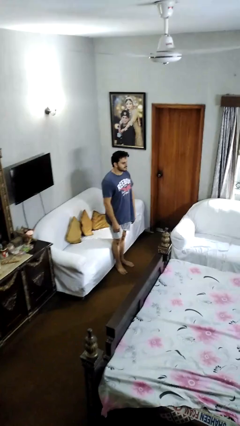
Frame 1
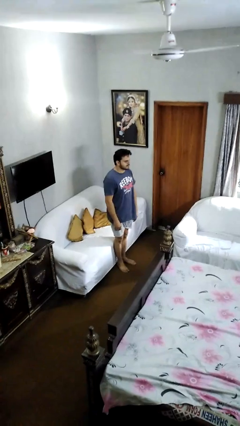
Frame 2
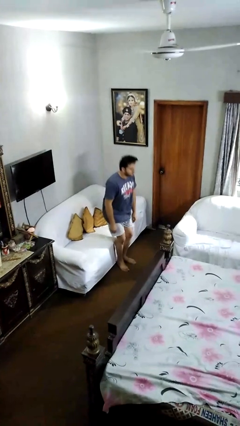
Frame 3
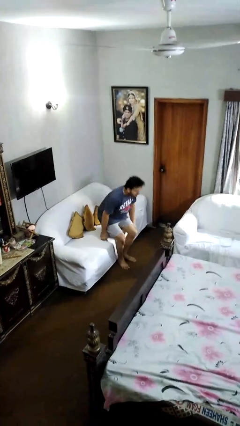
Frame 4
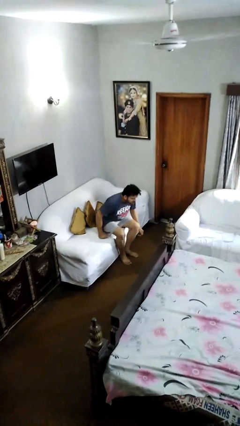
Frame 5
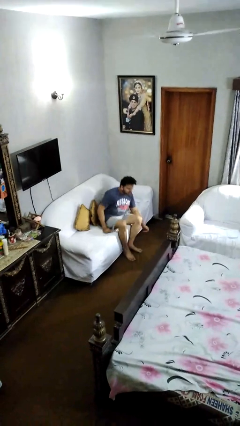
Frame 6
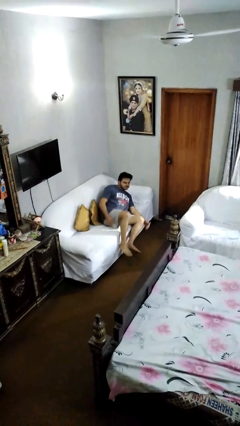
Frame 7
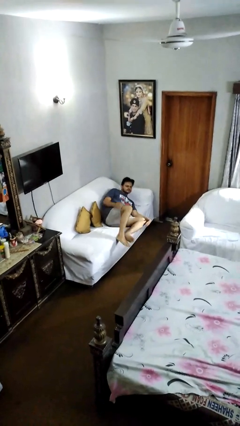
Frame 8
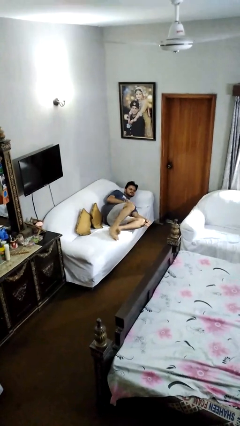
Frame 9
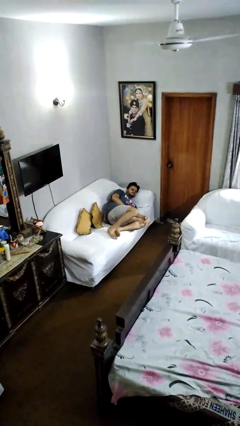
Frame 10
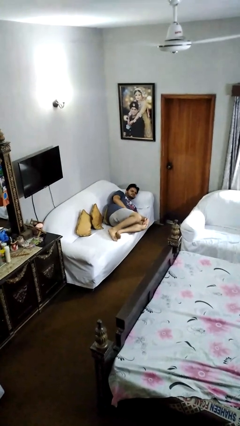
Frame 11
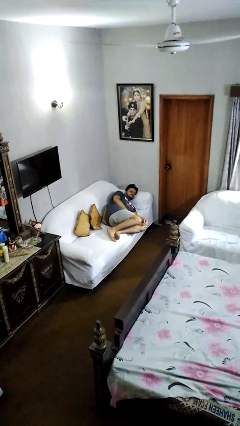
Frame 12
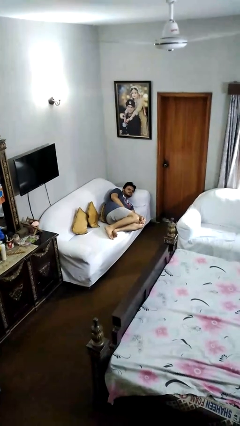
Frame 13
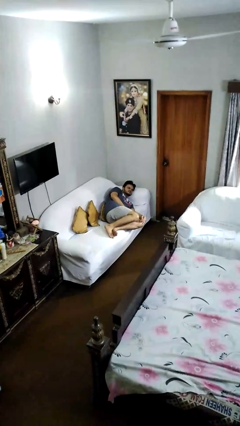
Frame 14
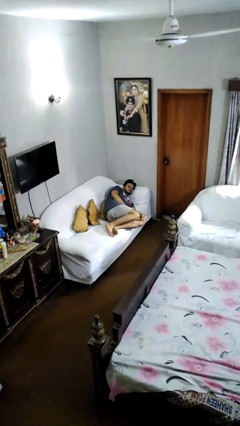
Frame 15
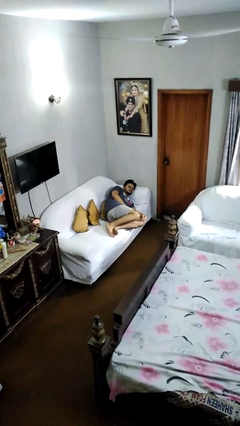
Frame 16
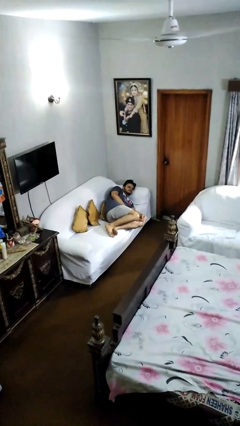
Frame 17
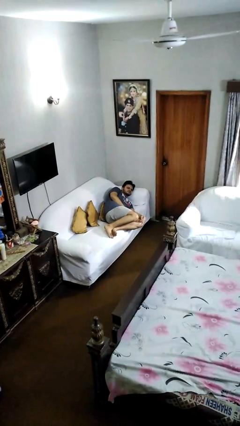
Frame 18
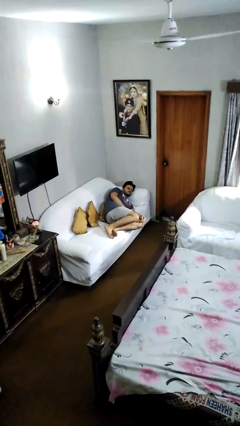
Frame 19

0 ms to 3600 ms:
person lies down on couch

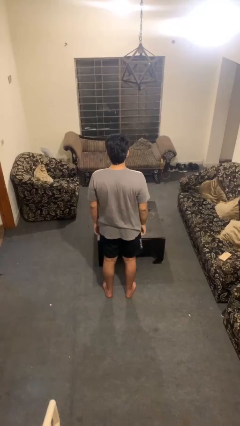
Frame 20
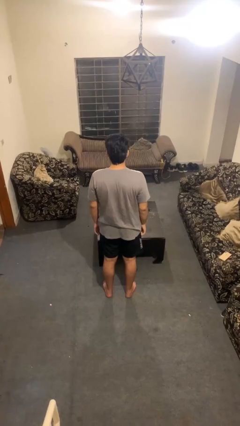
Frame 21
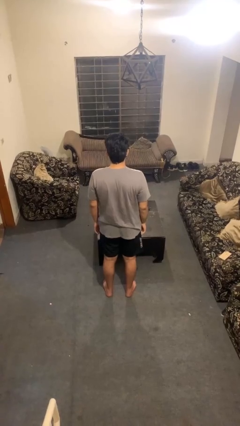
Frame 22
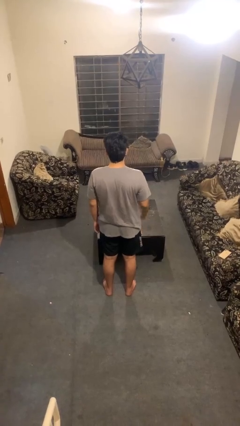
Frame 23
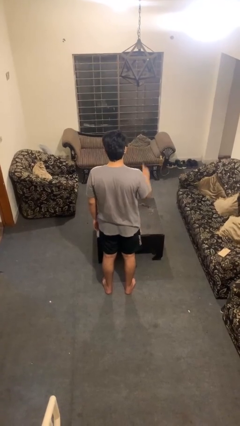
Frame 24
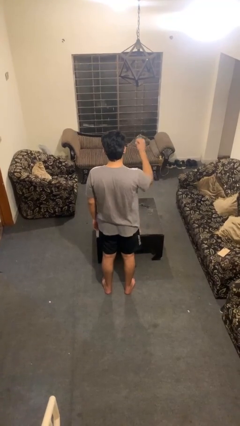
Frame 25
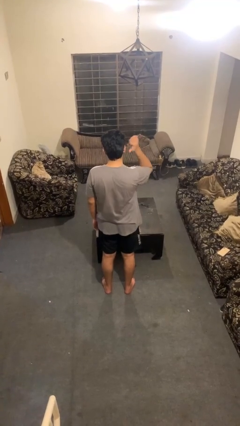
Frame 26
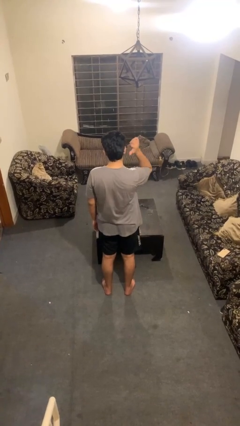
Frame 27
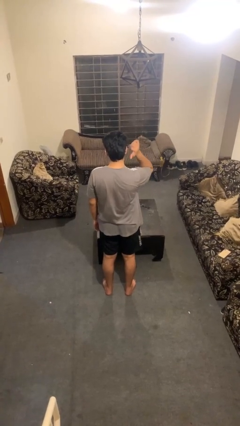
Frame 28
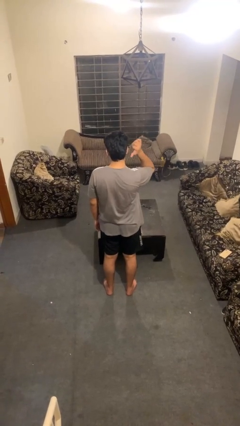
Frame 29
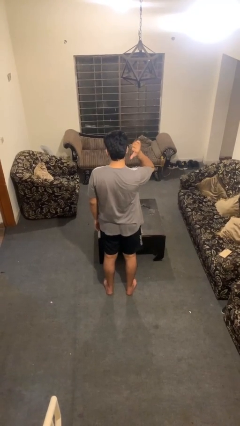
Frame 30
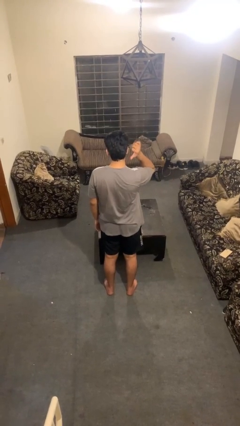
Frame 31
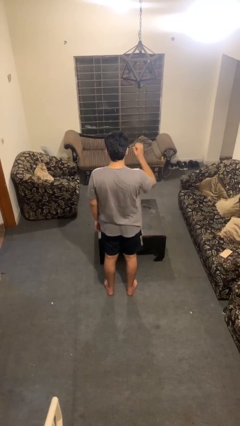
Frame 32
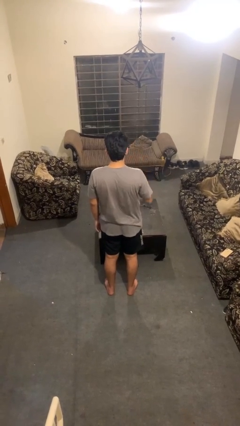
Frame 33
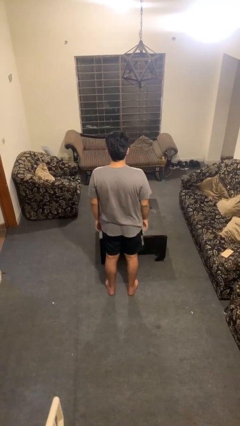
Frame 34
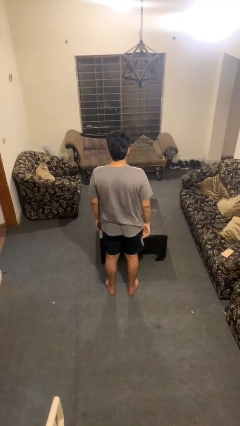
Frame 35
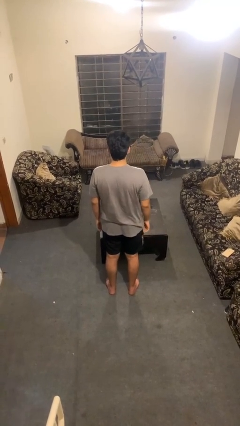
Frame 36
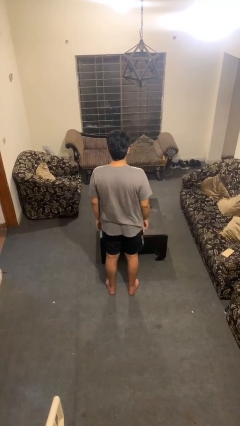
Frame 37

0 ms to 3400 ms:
person gestures behind me

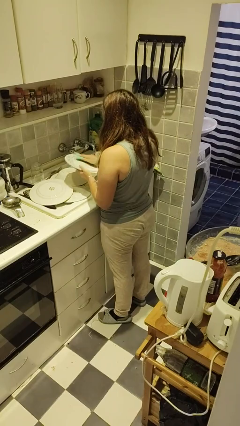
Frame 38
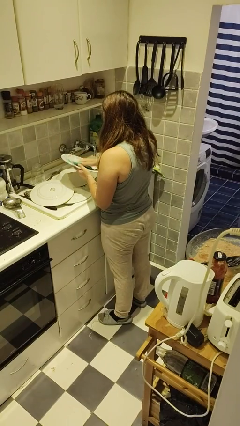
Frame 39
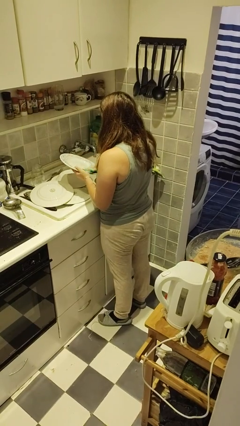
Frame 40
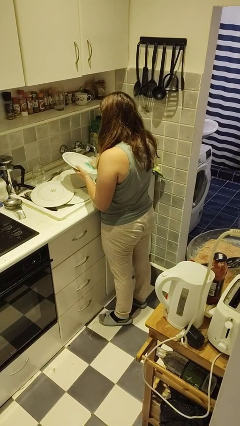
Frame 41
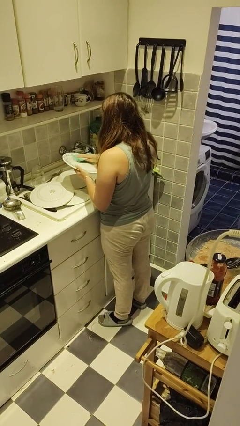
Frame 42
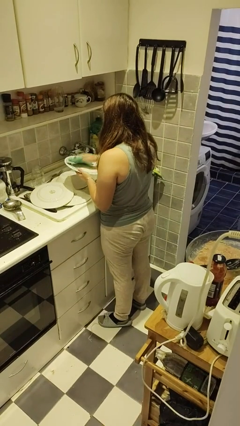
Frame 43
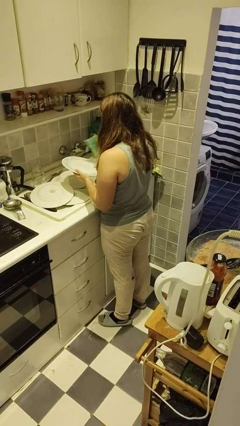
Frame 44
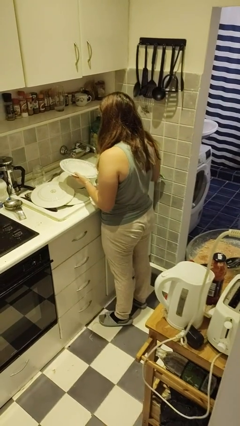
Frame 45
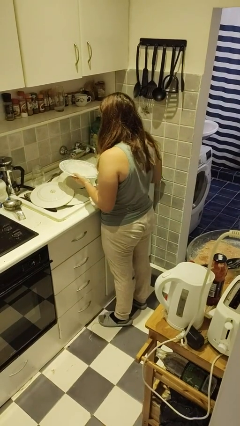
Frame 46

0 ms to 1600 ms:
person dries dish

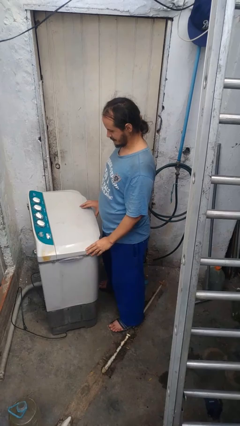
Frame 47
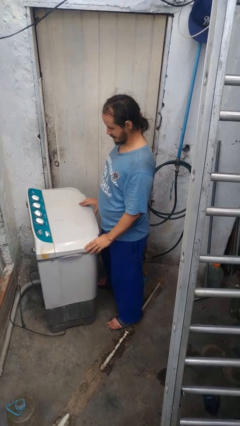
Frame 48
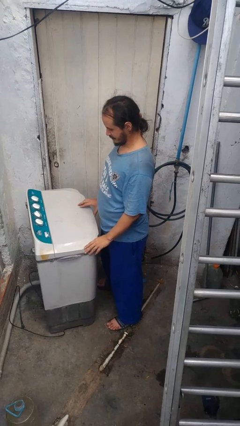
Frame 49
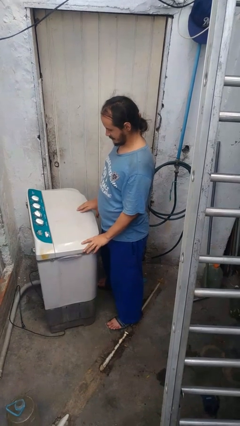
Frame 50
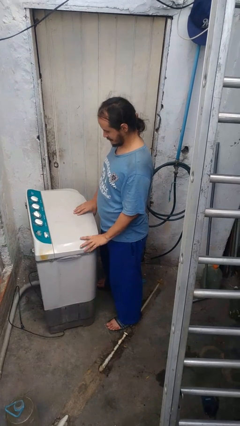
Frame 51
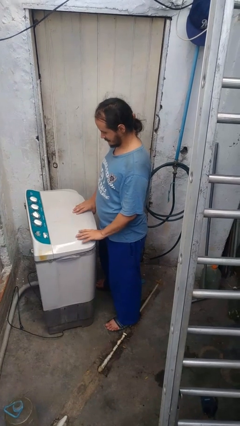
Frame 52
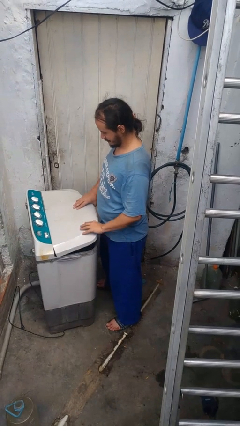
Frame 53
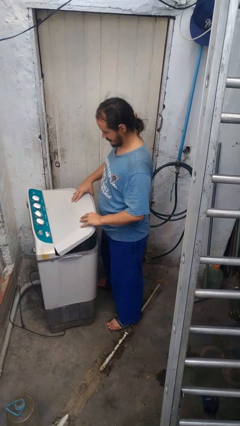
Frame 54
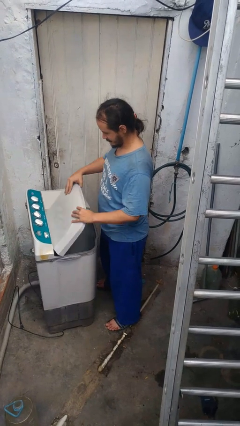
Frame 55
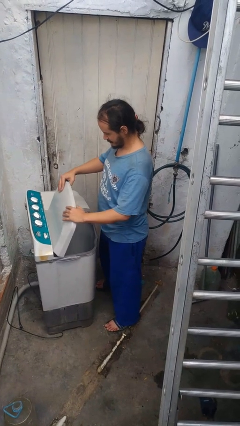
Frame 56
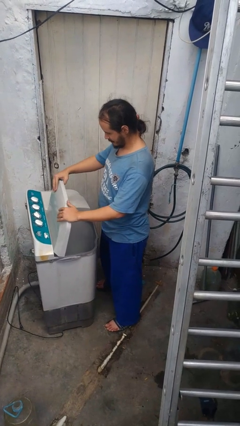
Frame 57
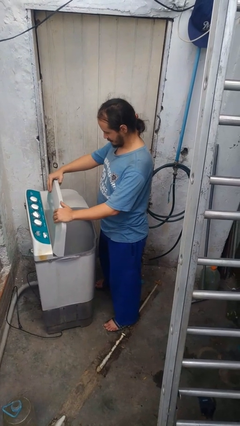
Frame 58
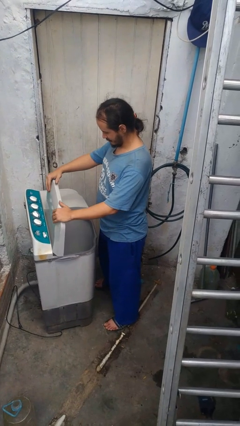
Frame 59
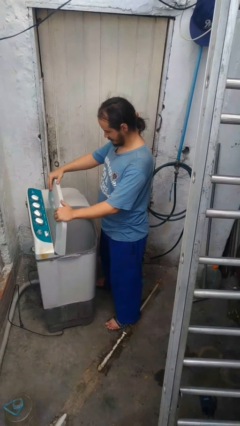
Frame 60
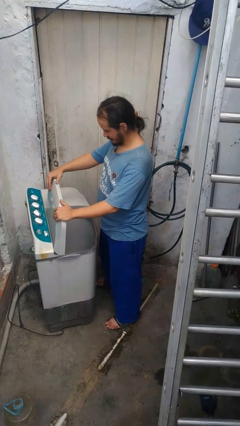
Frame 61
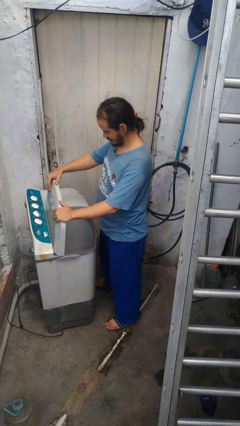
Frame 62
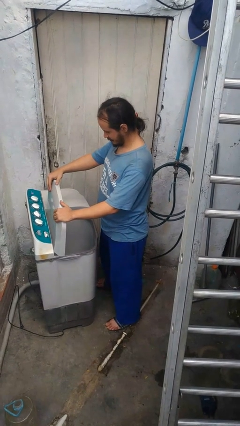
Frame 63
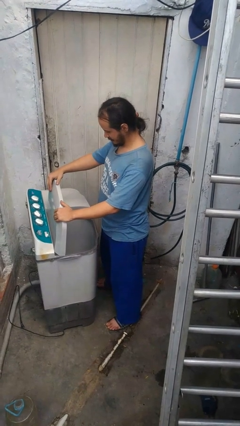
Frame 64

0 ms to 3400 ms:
person opens clothes washer

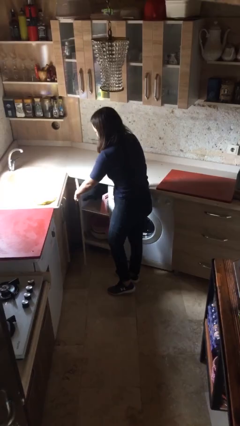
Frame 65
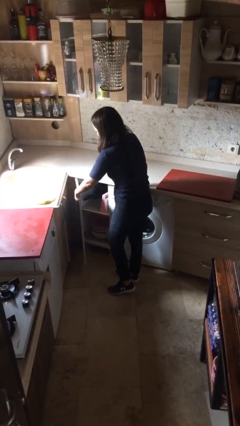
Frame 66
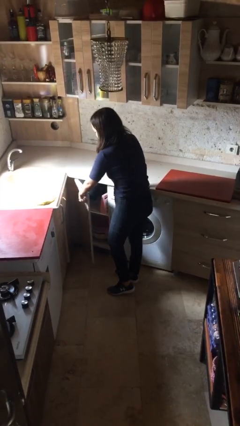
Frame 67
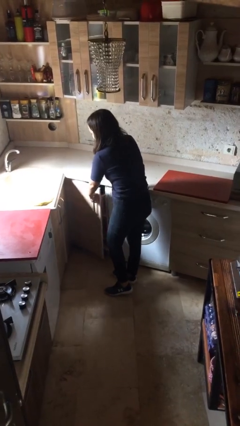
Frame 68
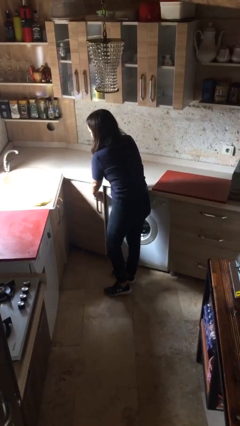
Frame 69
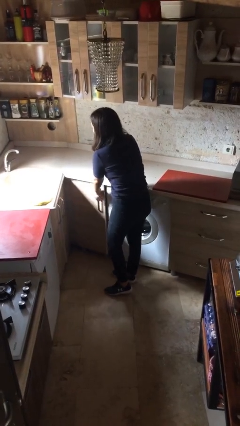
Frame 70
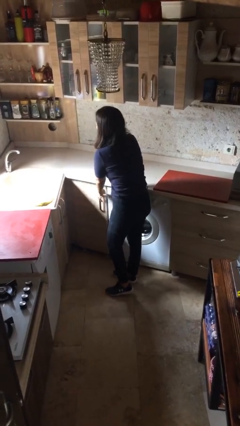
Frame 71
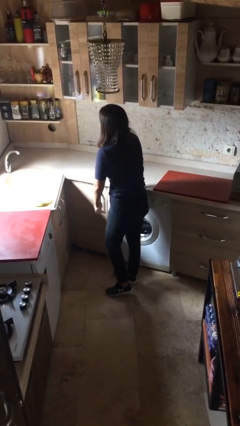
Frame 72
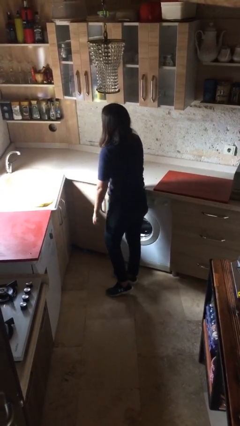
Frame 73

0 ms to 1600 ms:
person closes cabinet

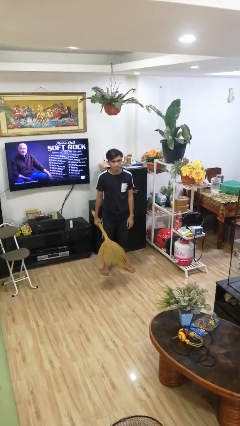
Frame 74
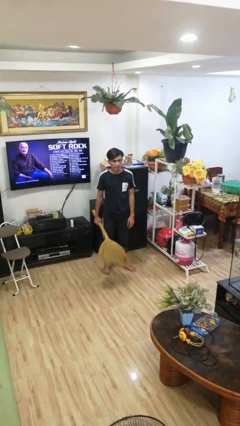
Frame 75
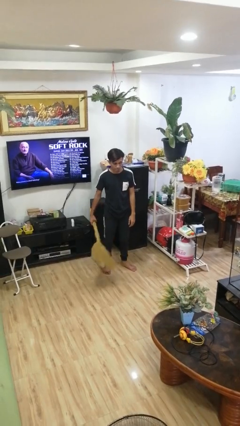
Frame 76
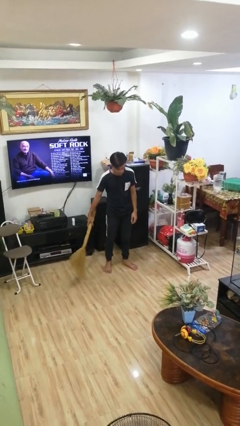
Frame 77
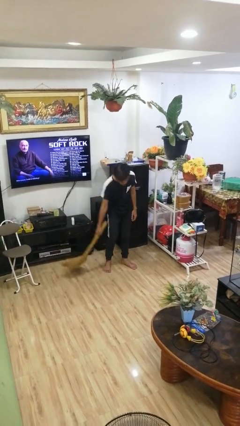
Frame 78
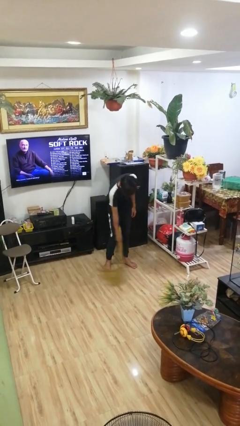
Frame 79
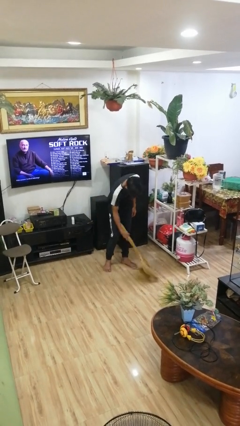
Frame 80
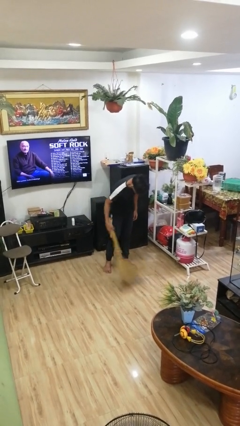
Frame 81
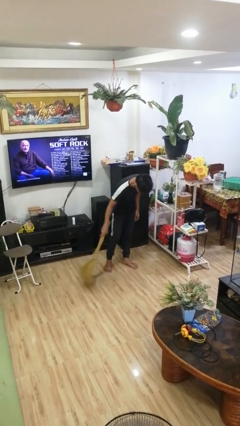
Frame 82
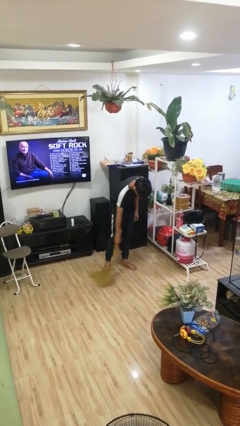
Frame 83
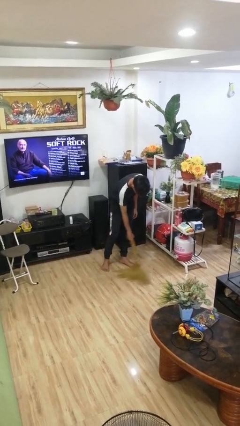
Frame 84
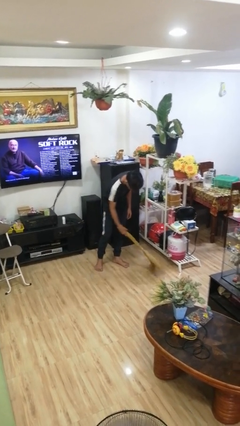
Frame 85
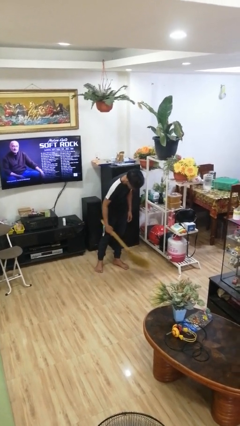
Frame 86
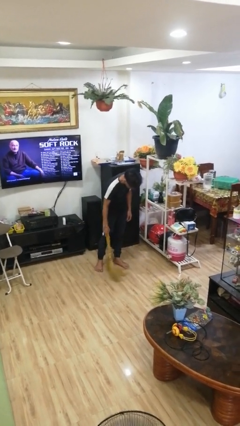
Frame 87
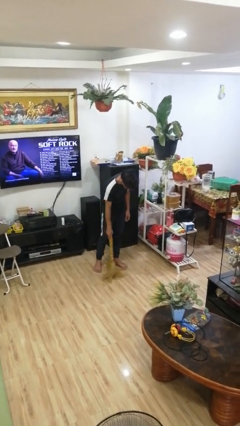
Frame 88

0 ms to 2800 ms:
person sweeps floor

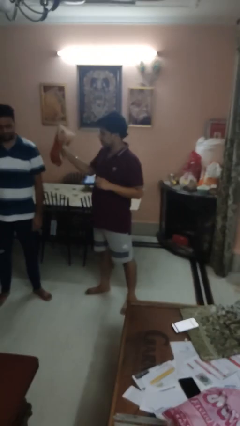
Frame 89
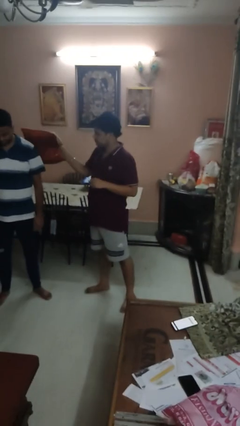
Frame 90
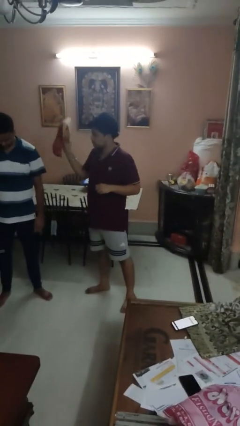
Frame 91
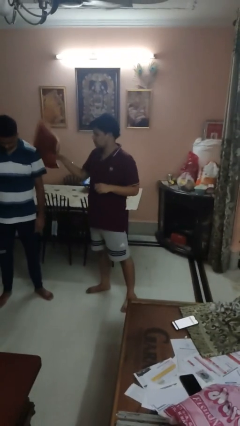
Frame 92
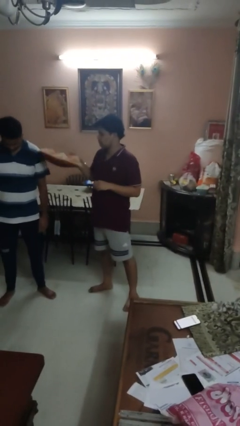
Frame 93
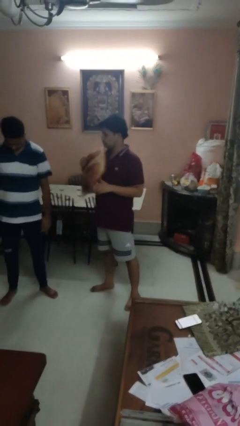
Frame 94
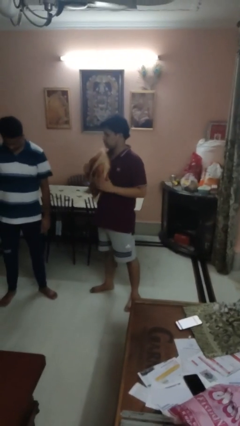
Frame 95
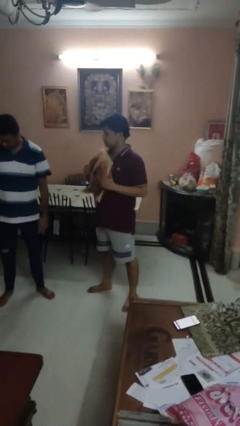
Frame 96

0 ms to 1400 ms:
person hits person with pillow
